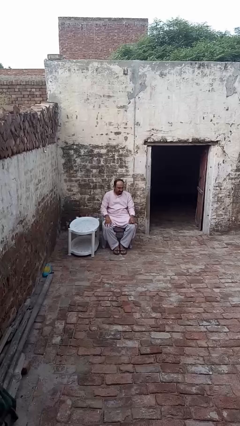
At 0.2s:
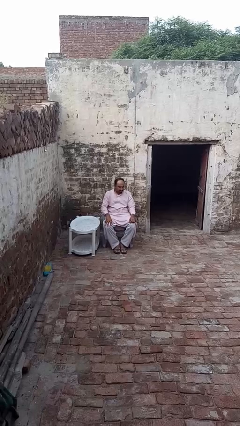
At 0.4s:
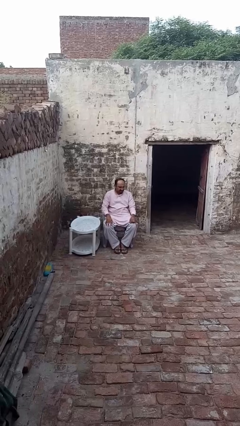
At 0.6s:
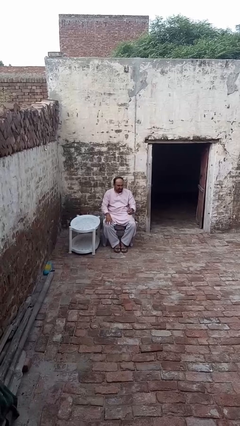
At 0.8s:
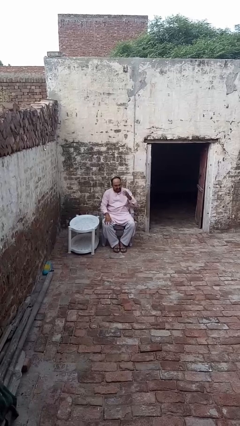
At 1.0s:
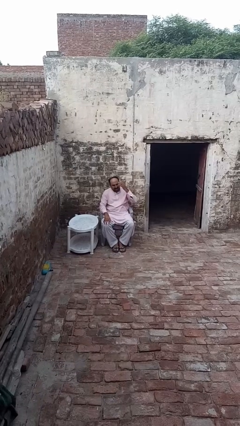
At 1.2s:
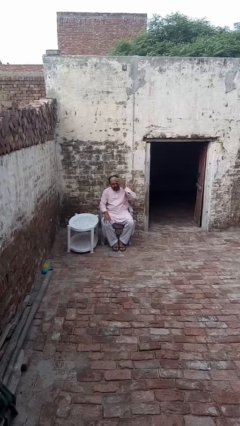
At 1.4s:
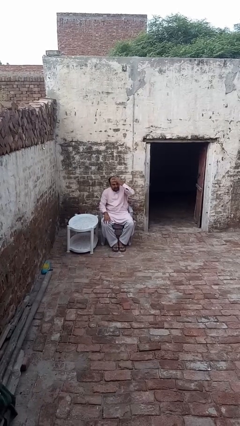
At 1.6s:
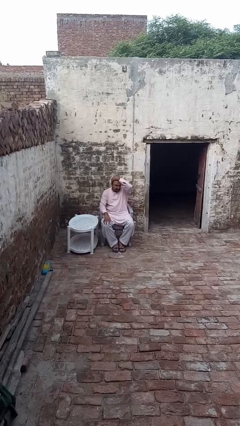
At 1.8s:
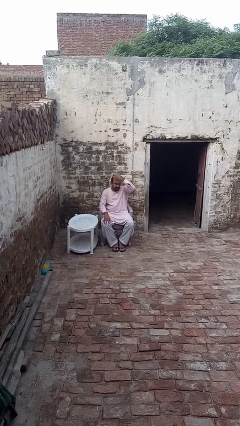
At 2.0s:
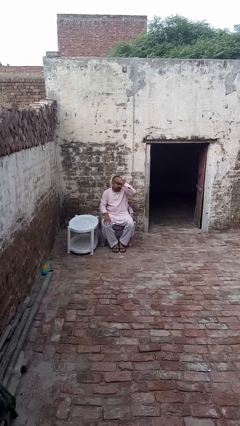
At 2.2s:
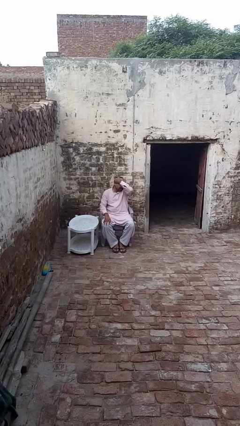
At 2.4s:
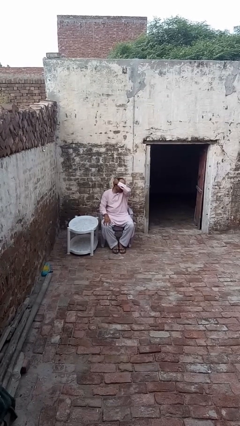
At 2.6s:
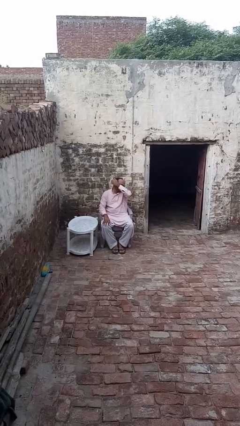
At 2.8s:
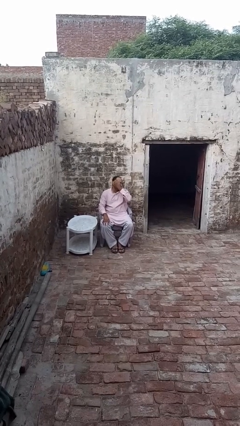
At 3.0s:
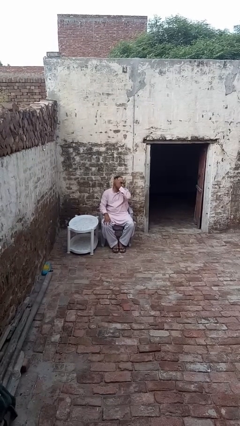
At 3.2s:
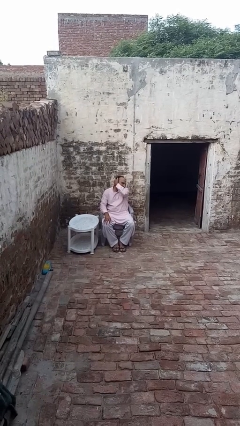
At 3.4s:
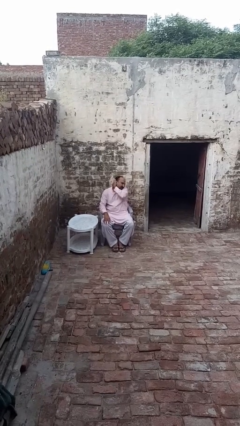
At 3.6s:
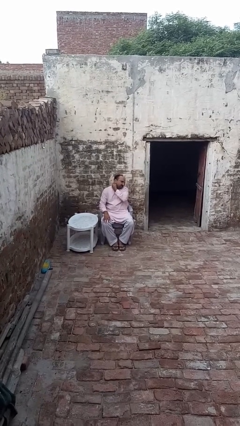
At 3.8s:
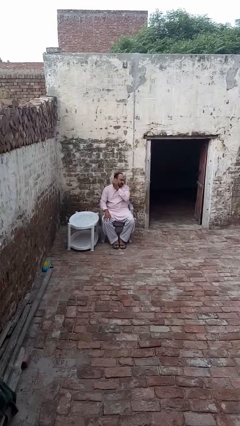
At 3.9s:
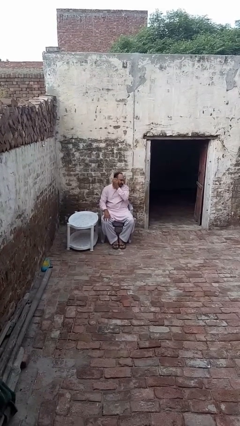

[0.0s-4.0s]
person strokes hair

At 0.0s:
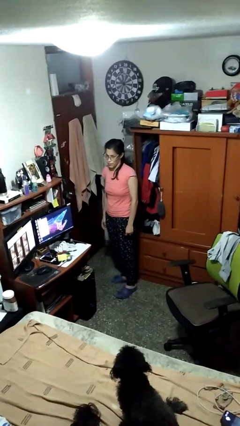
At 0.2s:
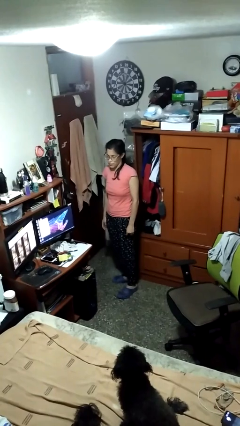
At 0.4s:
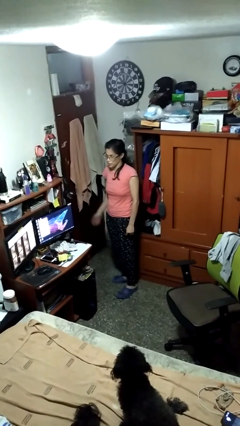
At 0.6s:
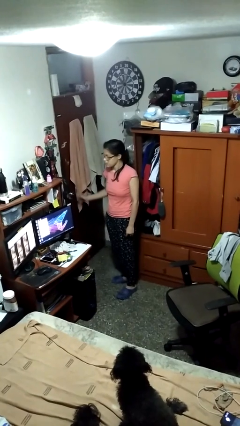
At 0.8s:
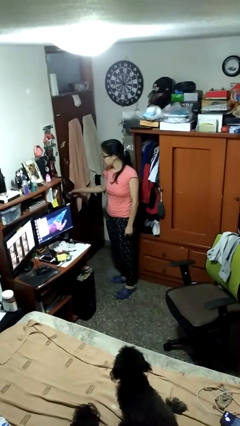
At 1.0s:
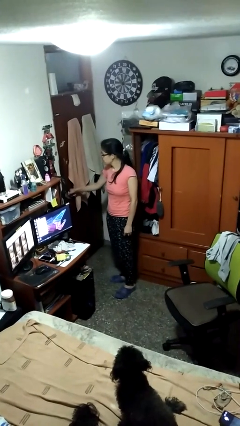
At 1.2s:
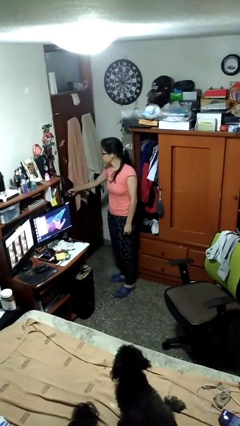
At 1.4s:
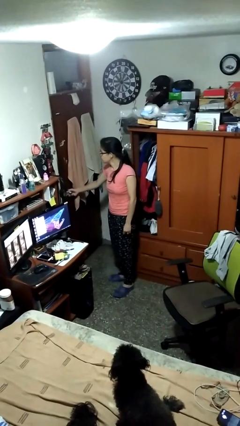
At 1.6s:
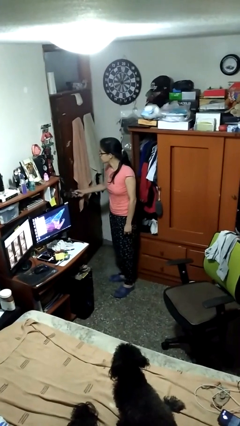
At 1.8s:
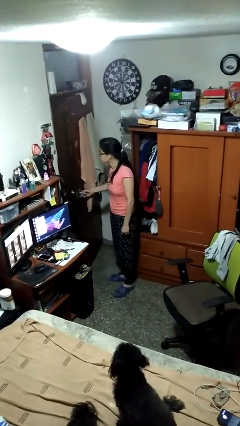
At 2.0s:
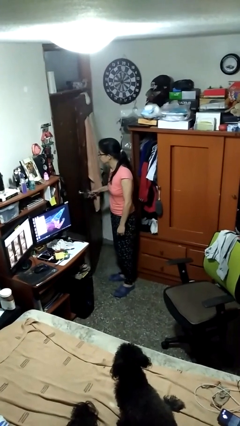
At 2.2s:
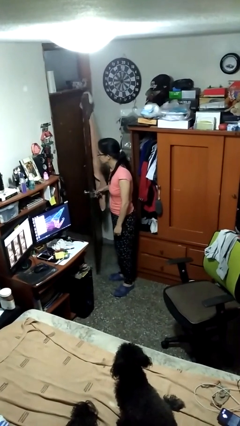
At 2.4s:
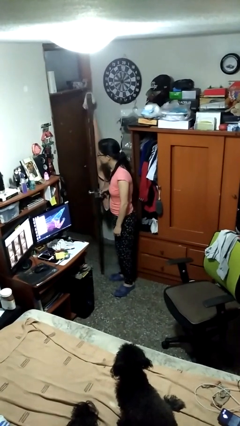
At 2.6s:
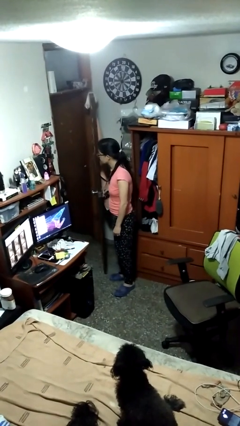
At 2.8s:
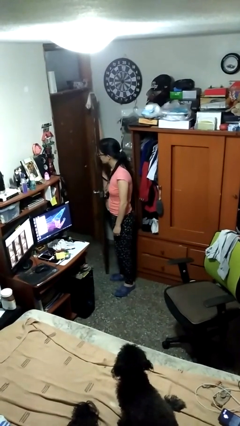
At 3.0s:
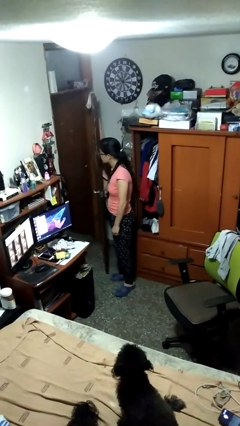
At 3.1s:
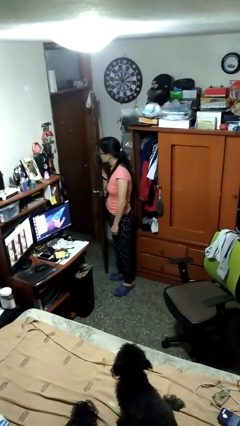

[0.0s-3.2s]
person opens facility door

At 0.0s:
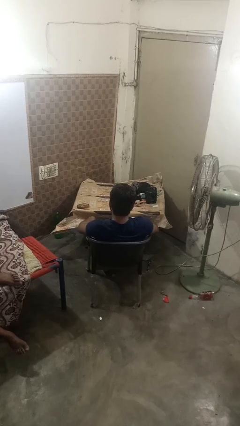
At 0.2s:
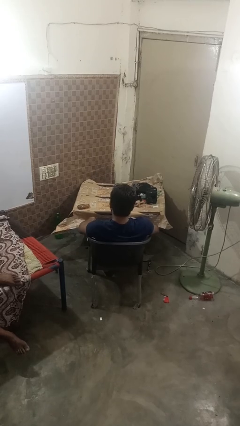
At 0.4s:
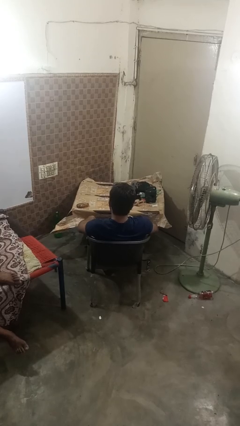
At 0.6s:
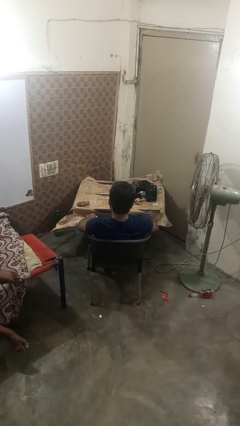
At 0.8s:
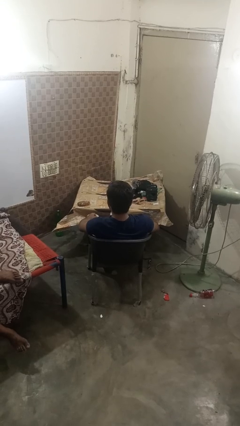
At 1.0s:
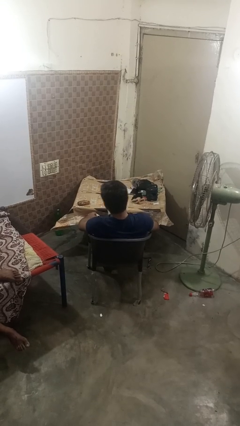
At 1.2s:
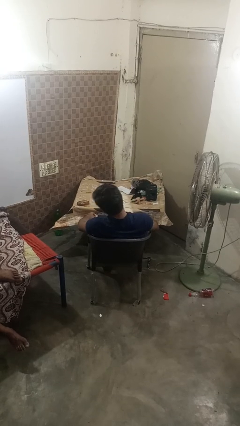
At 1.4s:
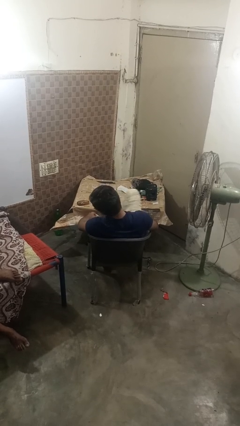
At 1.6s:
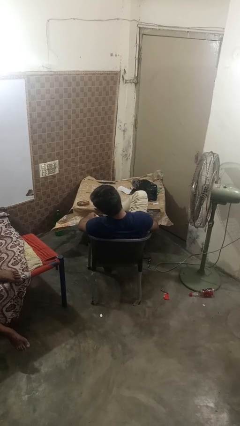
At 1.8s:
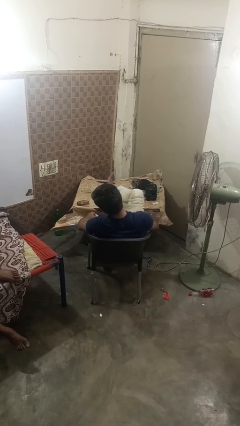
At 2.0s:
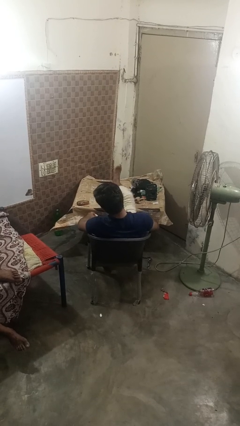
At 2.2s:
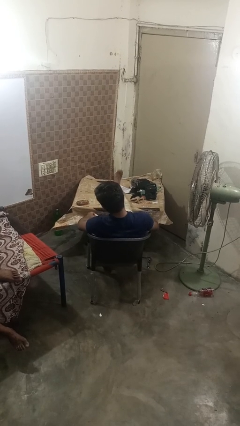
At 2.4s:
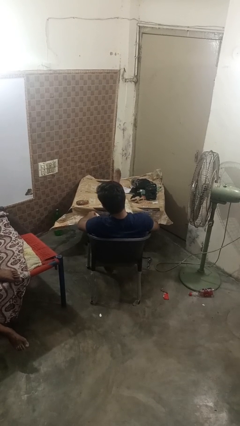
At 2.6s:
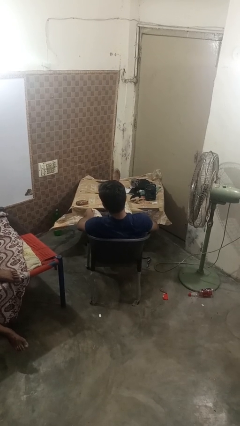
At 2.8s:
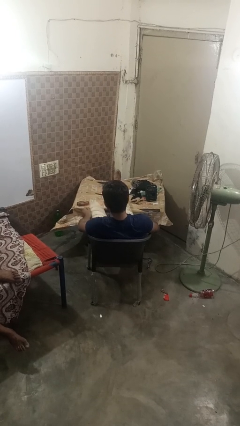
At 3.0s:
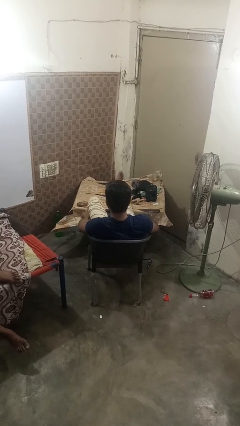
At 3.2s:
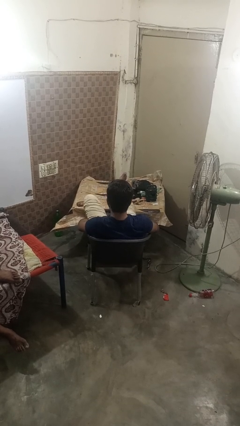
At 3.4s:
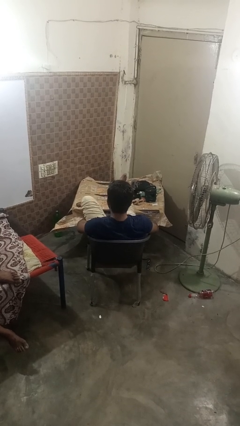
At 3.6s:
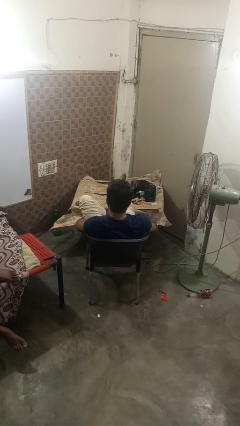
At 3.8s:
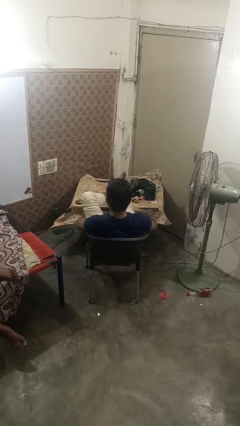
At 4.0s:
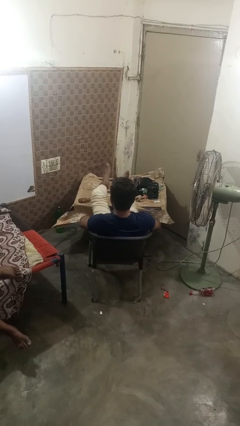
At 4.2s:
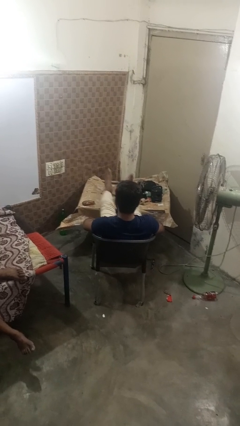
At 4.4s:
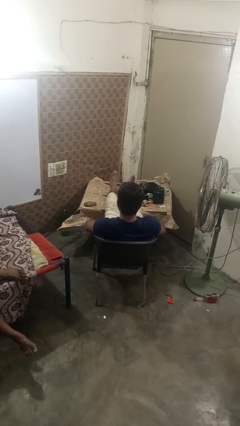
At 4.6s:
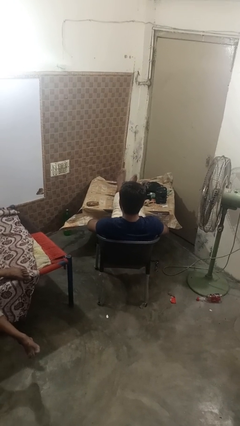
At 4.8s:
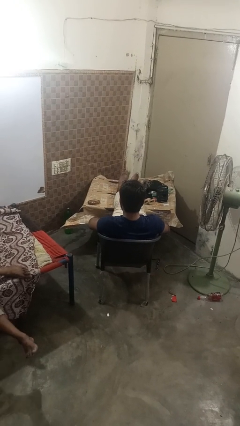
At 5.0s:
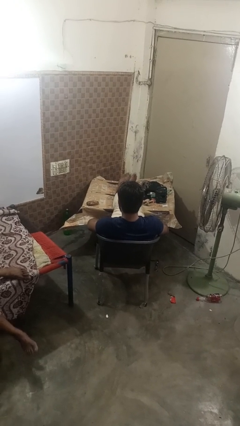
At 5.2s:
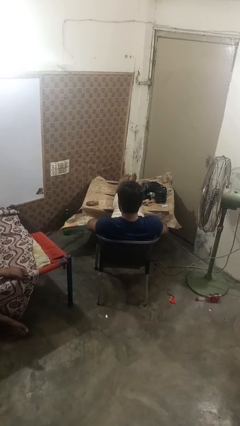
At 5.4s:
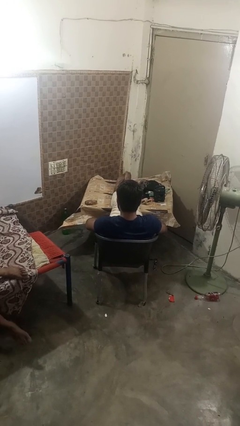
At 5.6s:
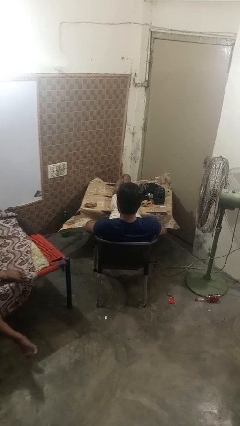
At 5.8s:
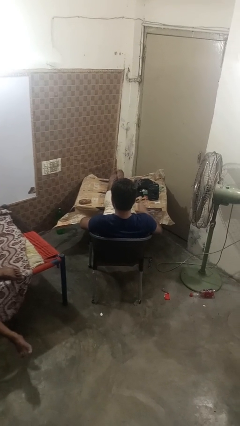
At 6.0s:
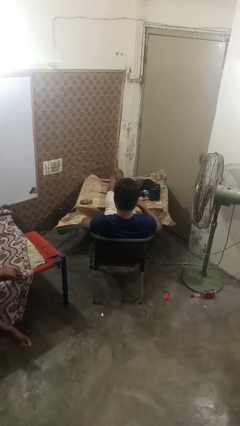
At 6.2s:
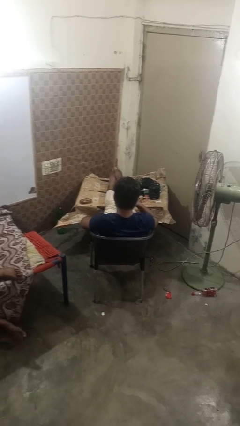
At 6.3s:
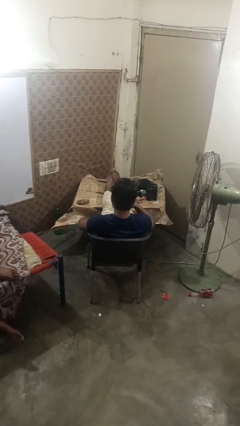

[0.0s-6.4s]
person puts feet up

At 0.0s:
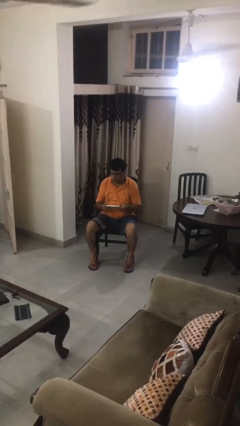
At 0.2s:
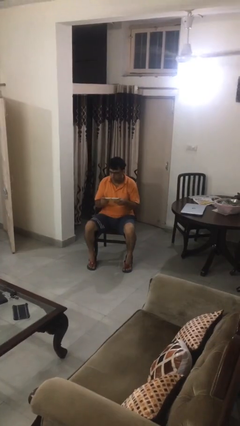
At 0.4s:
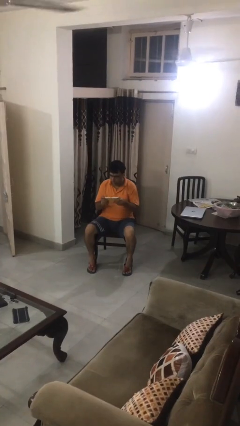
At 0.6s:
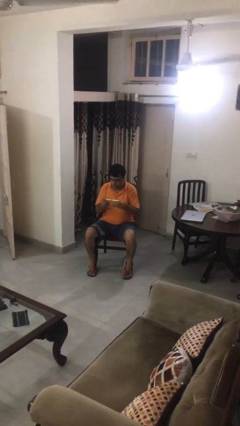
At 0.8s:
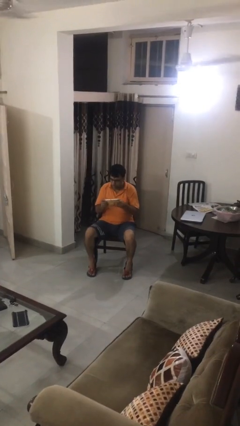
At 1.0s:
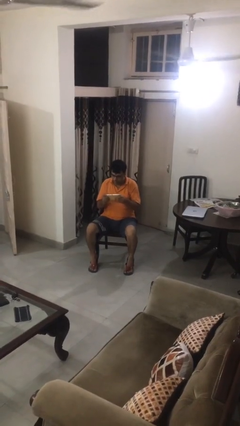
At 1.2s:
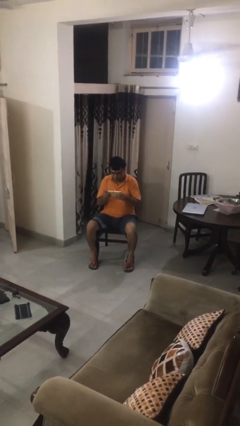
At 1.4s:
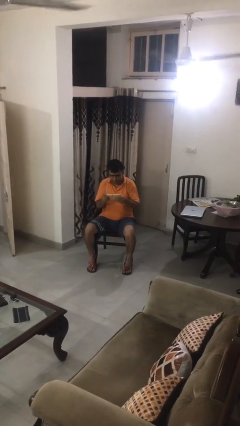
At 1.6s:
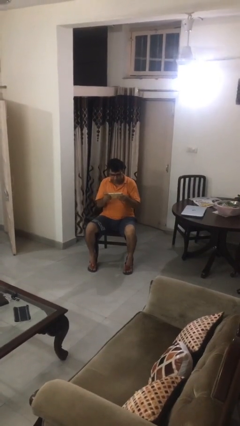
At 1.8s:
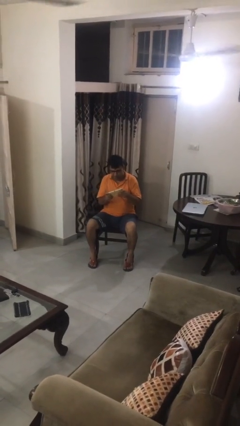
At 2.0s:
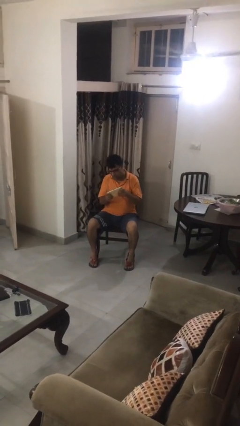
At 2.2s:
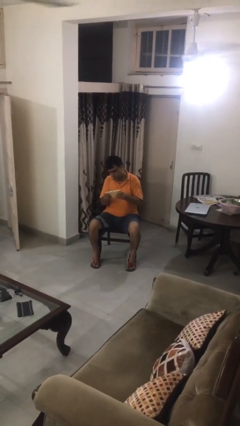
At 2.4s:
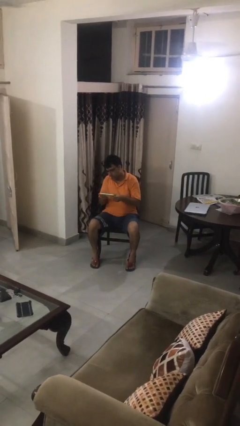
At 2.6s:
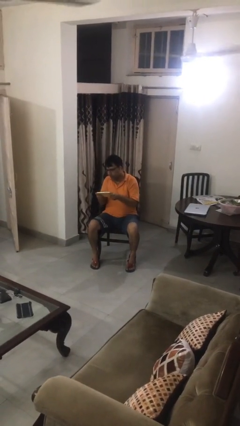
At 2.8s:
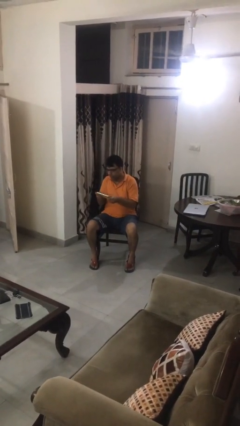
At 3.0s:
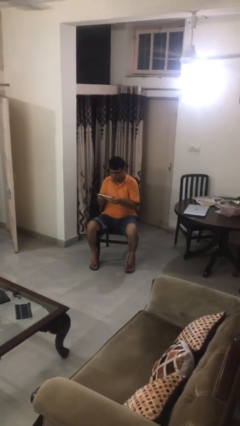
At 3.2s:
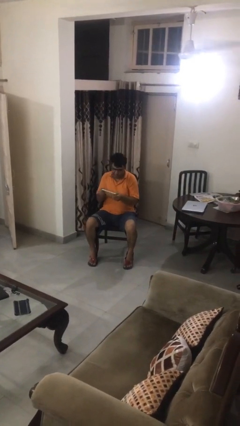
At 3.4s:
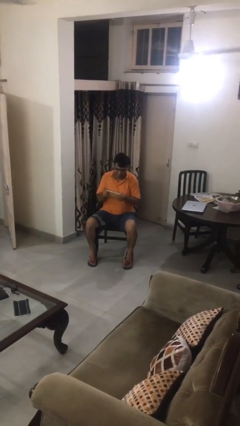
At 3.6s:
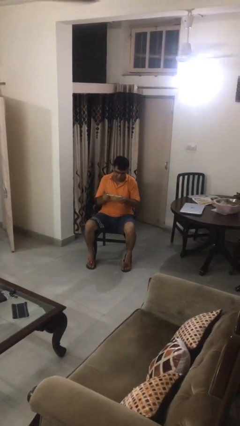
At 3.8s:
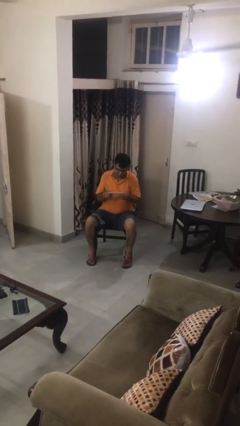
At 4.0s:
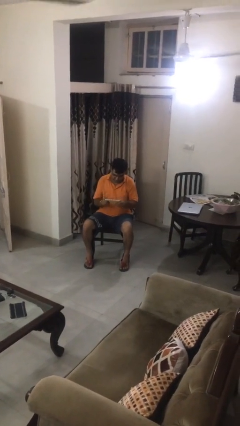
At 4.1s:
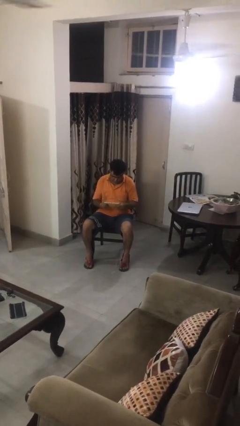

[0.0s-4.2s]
person interacts with handheld game

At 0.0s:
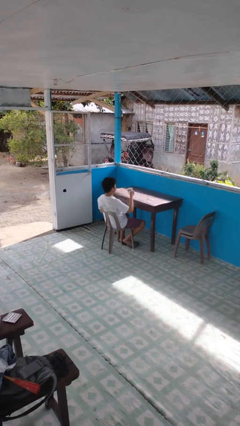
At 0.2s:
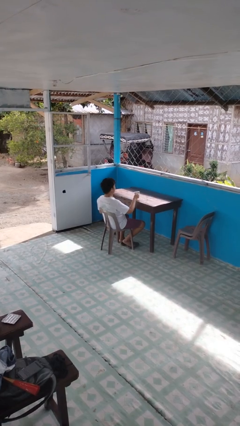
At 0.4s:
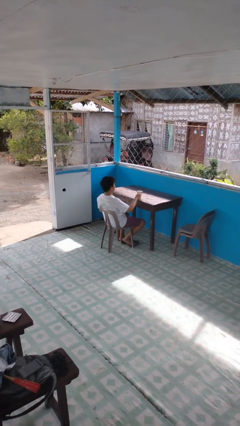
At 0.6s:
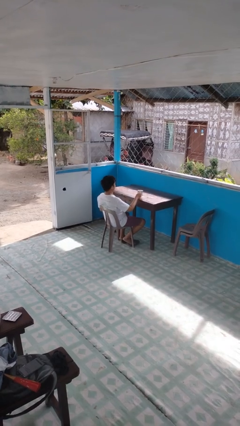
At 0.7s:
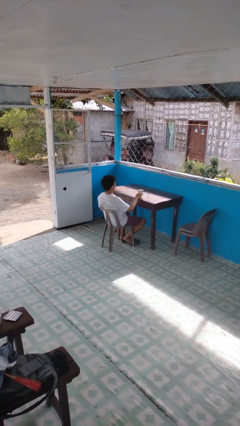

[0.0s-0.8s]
person puts down object on table
